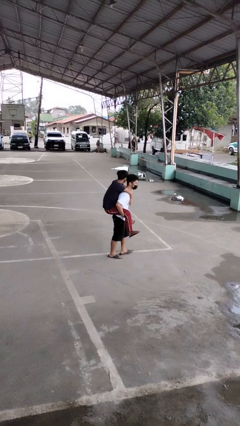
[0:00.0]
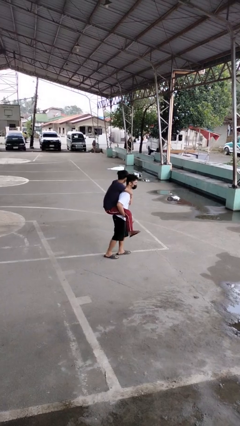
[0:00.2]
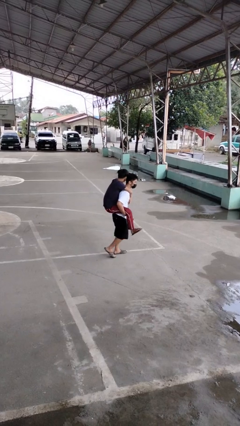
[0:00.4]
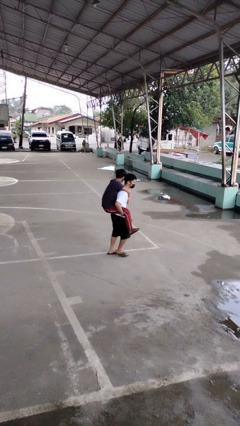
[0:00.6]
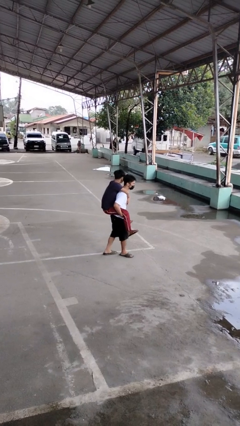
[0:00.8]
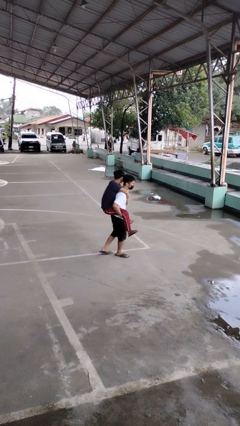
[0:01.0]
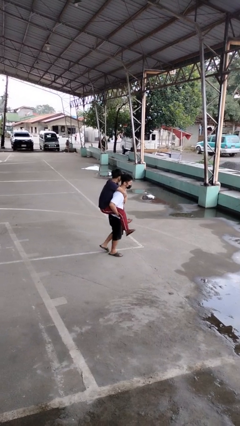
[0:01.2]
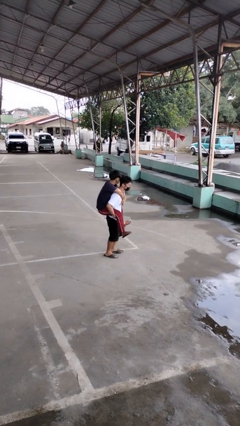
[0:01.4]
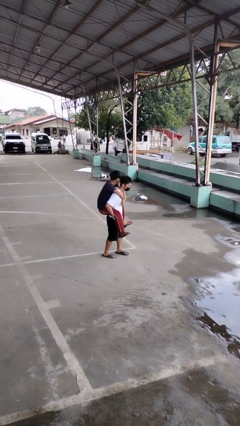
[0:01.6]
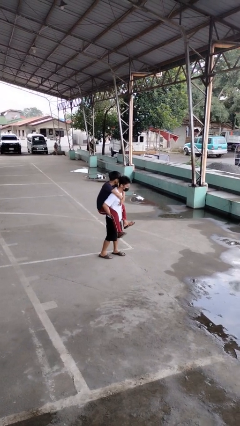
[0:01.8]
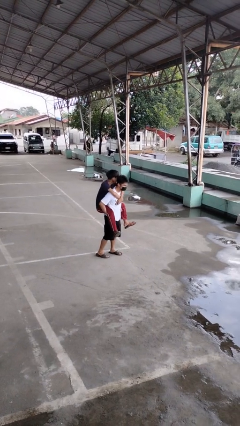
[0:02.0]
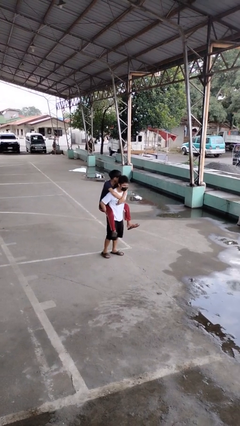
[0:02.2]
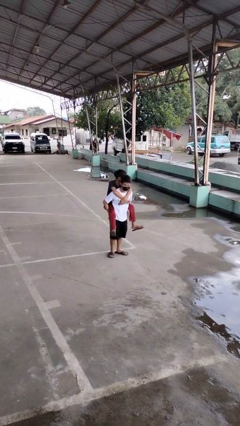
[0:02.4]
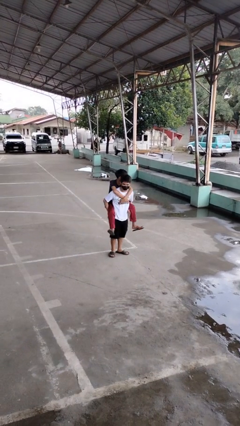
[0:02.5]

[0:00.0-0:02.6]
person carries person on back

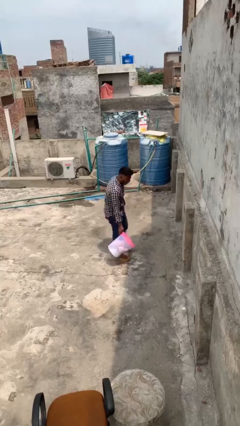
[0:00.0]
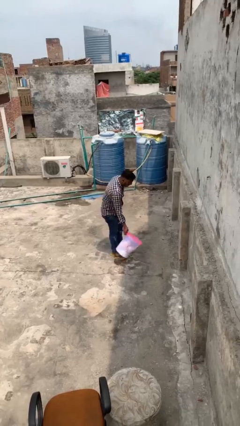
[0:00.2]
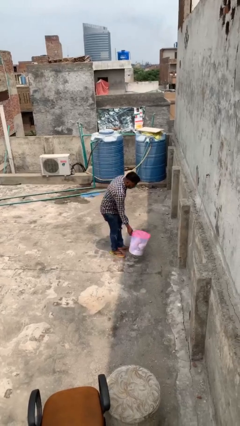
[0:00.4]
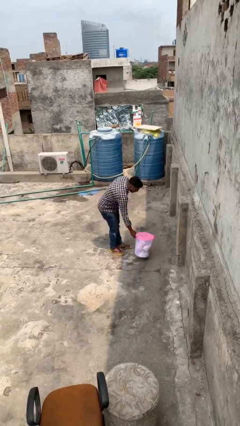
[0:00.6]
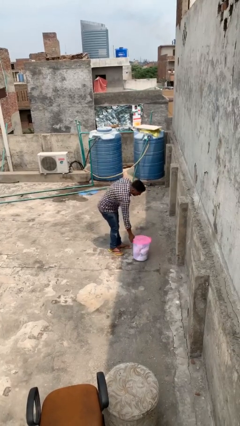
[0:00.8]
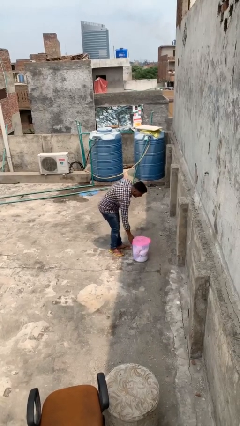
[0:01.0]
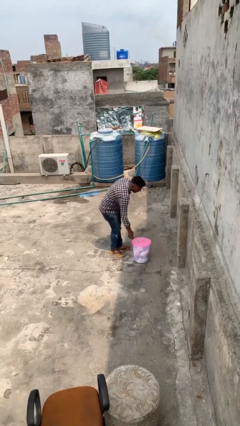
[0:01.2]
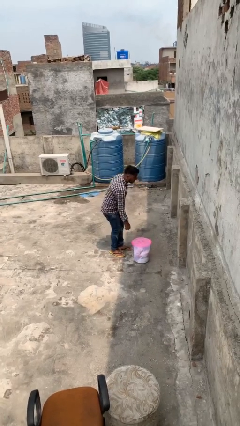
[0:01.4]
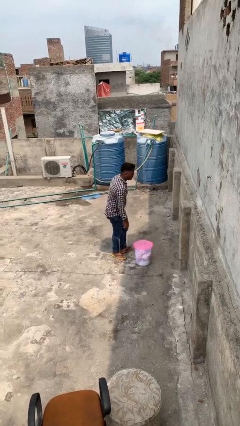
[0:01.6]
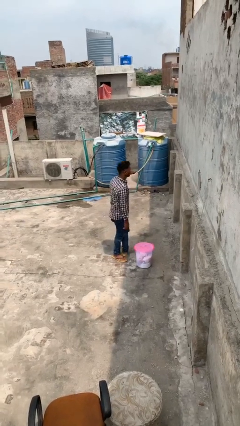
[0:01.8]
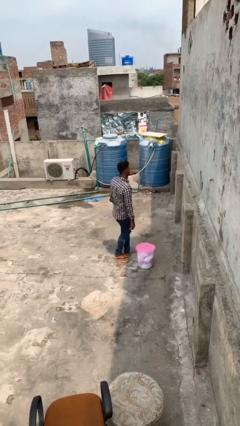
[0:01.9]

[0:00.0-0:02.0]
person puts down object on floor

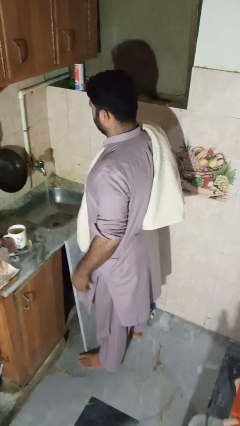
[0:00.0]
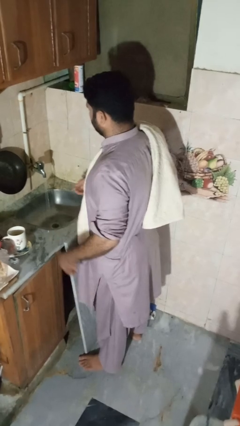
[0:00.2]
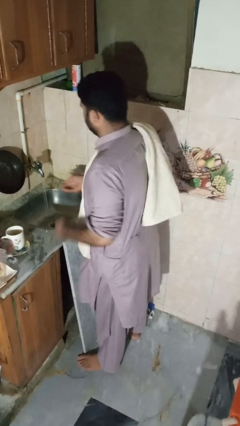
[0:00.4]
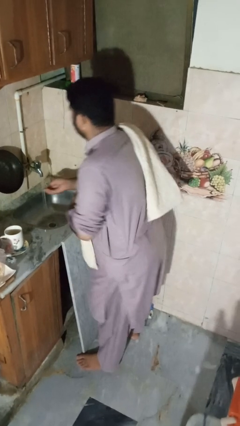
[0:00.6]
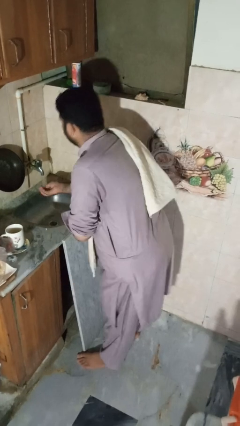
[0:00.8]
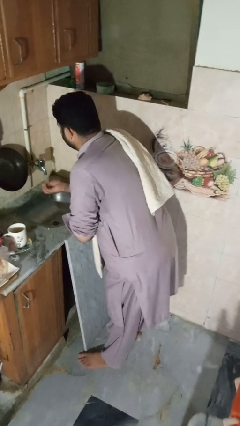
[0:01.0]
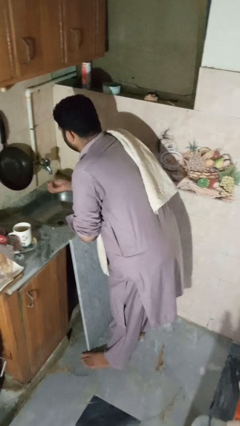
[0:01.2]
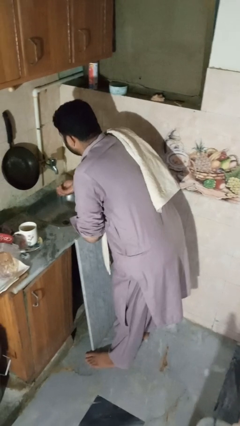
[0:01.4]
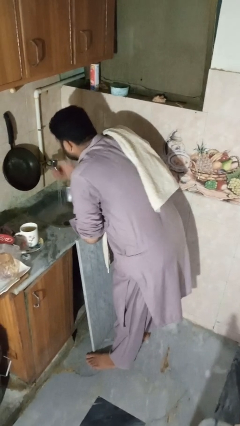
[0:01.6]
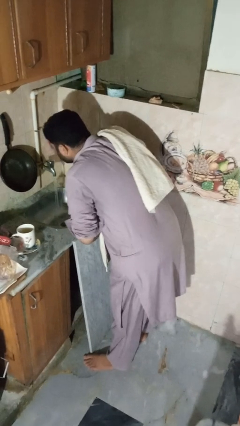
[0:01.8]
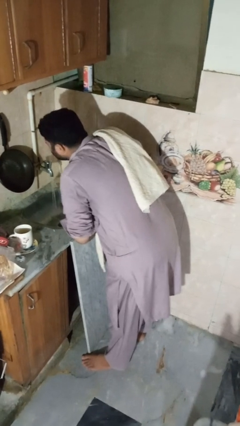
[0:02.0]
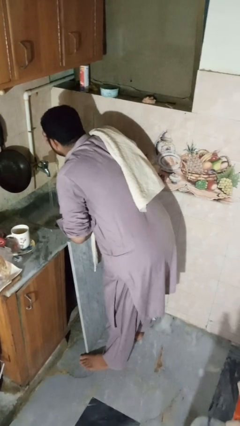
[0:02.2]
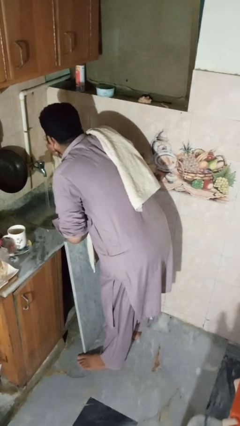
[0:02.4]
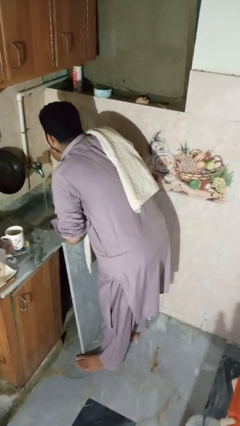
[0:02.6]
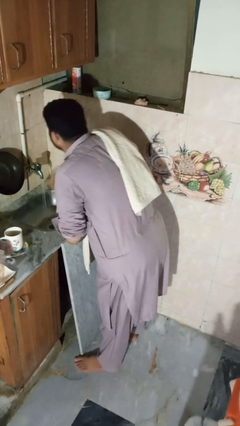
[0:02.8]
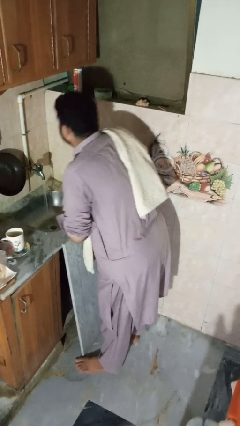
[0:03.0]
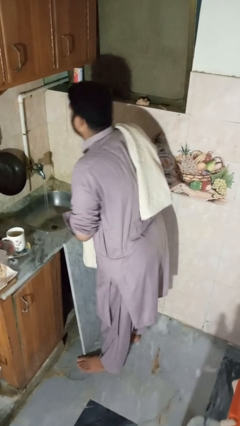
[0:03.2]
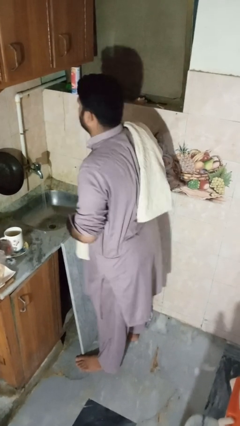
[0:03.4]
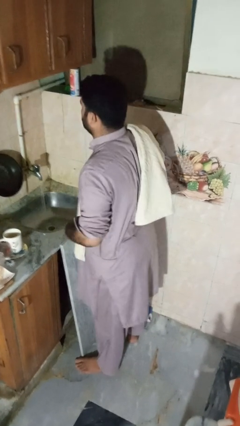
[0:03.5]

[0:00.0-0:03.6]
person washes face

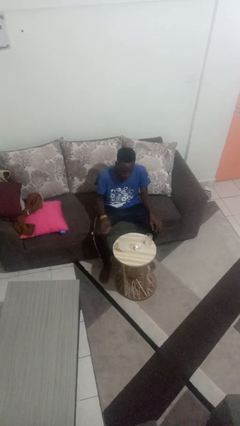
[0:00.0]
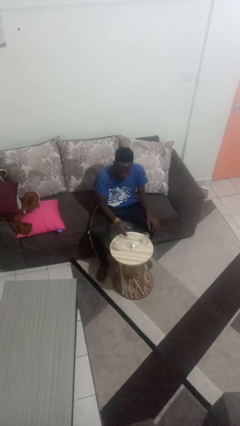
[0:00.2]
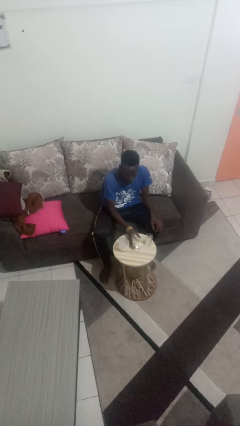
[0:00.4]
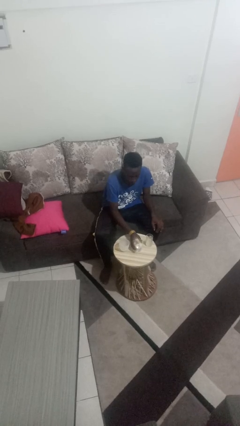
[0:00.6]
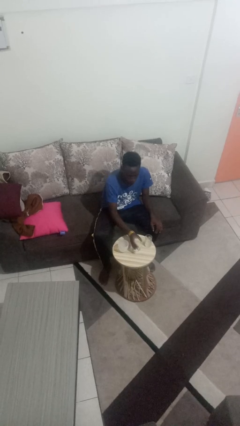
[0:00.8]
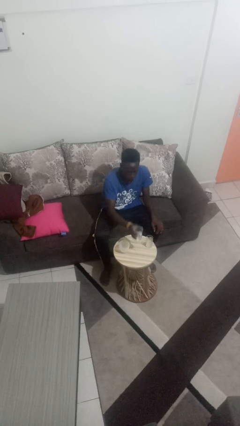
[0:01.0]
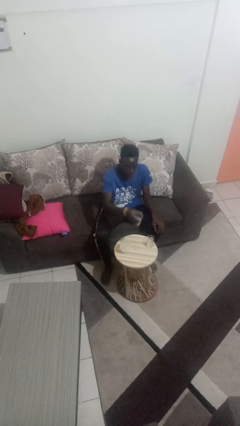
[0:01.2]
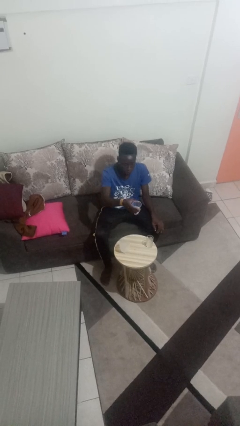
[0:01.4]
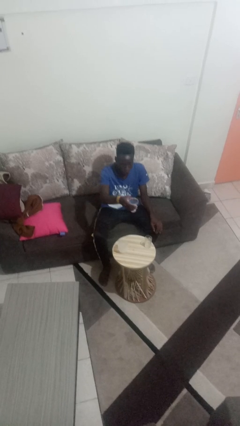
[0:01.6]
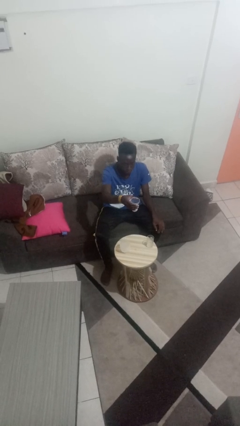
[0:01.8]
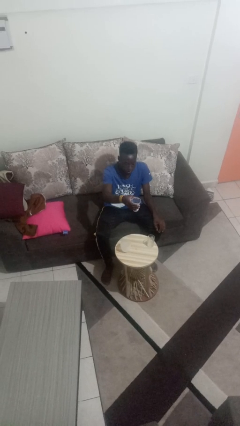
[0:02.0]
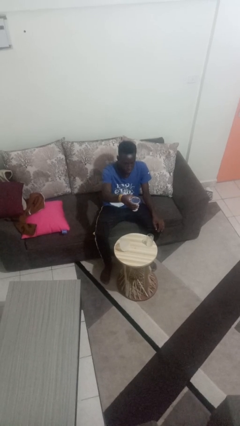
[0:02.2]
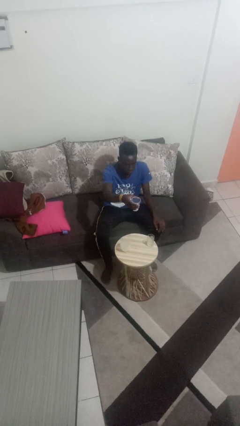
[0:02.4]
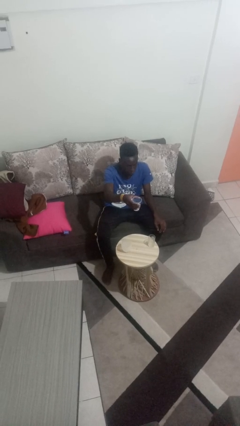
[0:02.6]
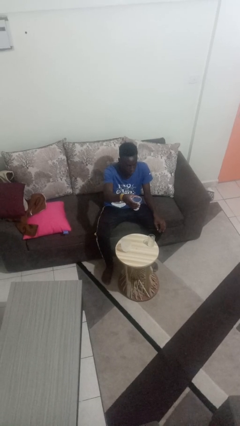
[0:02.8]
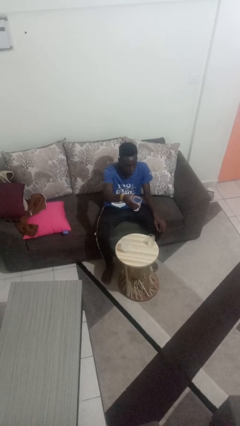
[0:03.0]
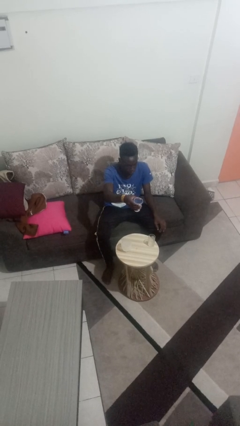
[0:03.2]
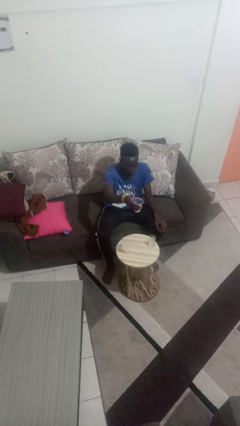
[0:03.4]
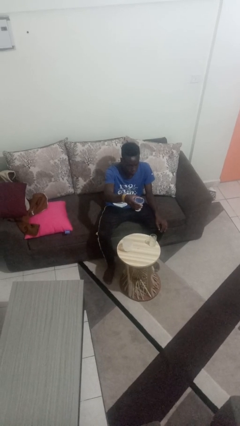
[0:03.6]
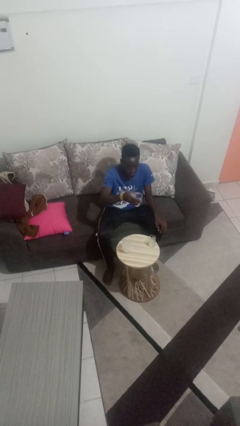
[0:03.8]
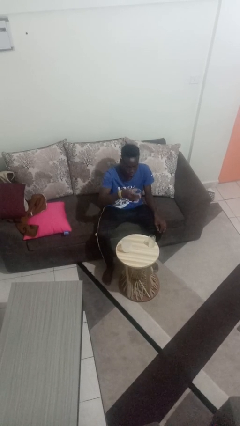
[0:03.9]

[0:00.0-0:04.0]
person picks up object from table

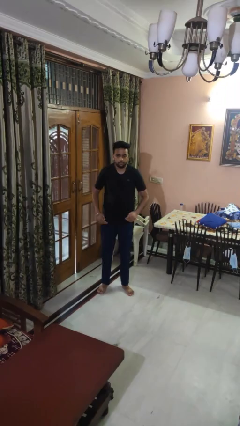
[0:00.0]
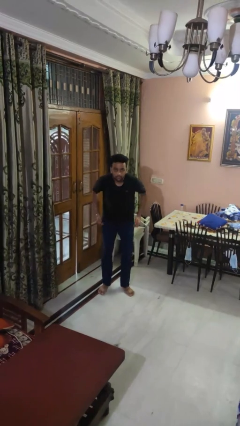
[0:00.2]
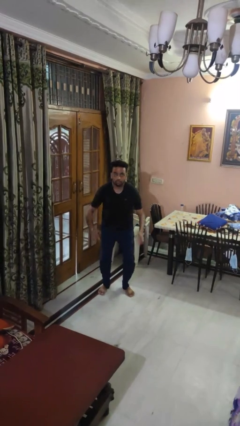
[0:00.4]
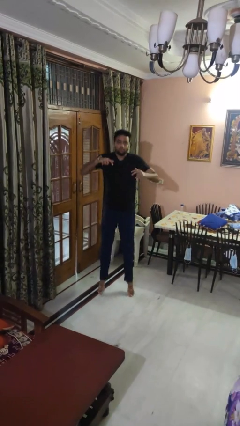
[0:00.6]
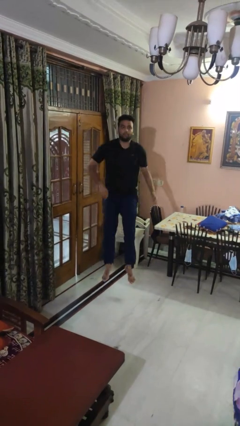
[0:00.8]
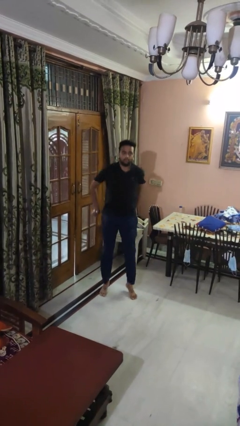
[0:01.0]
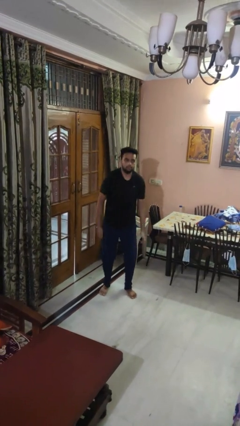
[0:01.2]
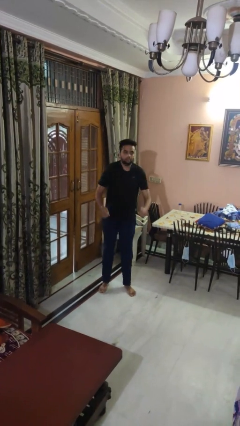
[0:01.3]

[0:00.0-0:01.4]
person jumps

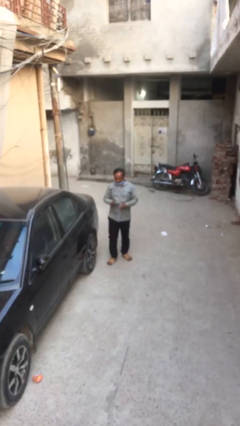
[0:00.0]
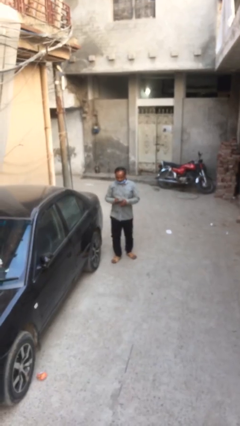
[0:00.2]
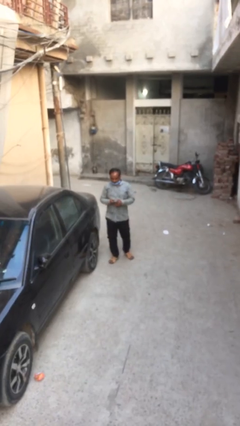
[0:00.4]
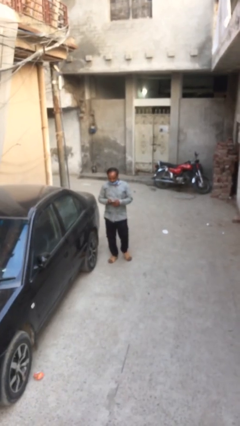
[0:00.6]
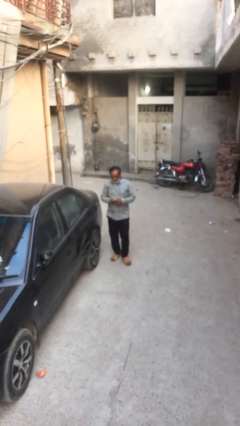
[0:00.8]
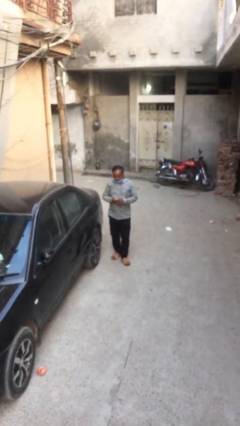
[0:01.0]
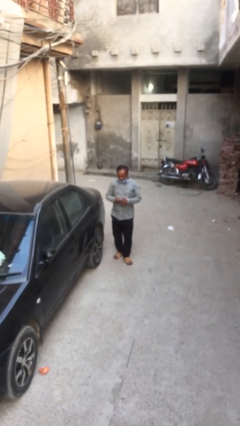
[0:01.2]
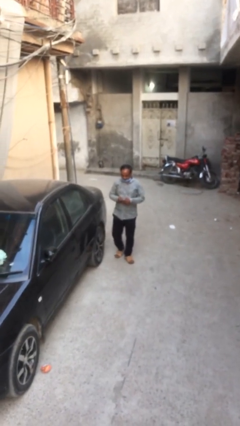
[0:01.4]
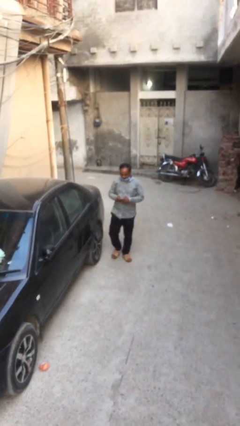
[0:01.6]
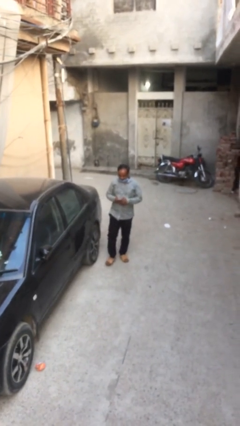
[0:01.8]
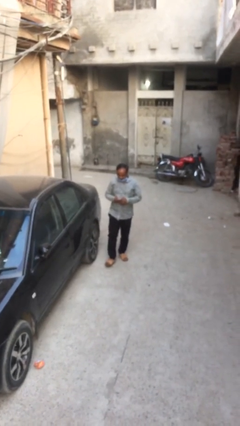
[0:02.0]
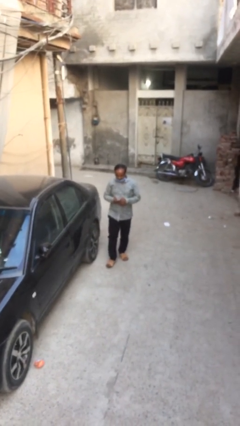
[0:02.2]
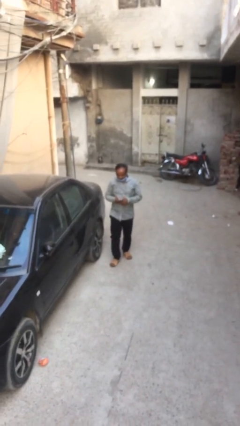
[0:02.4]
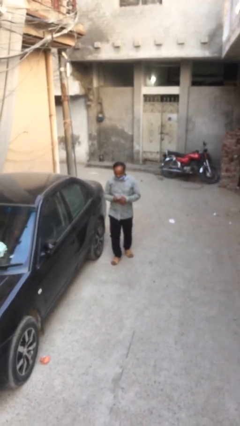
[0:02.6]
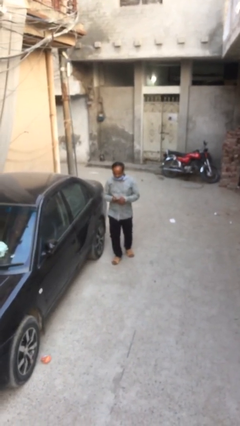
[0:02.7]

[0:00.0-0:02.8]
person texts on phone

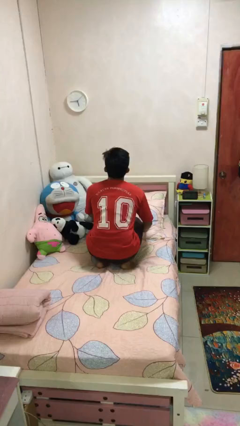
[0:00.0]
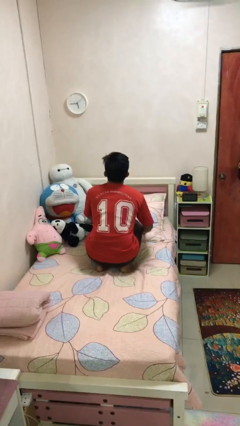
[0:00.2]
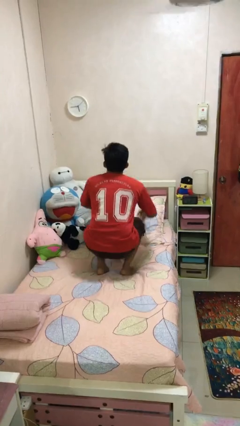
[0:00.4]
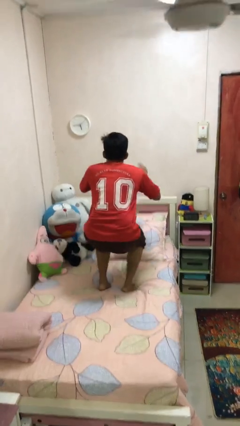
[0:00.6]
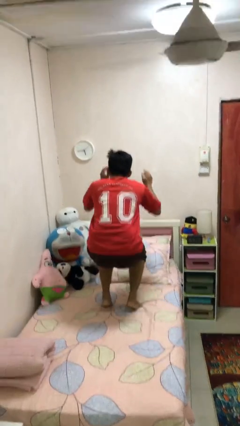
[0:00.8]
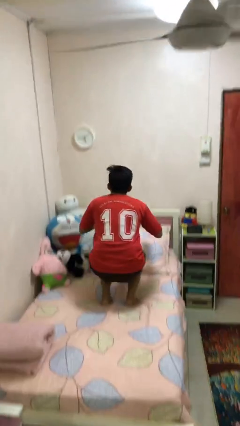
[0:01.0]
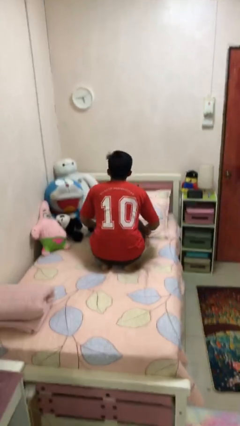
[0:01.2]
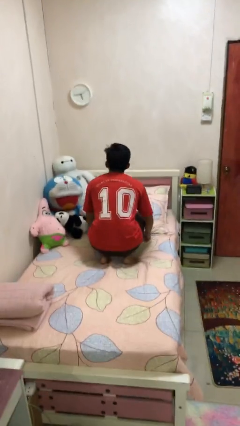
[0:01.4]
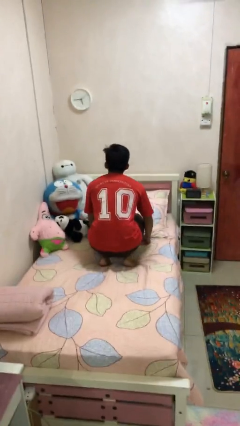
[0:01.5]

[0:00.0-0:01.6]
person jumps on bed
